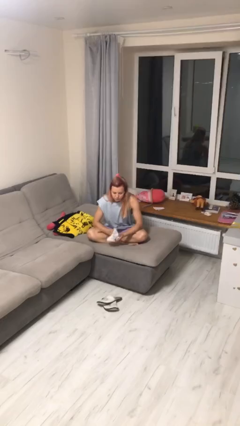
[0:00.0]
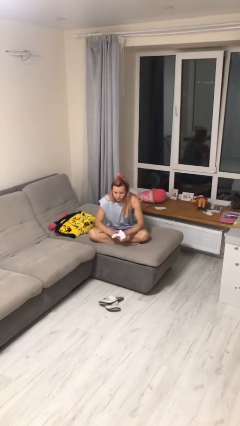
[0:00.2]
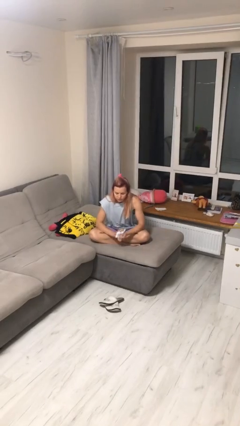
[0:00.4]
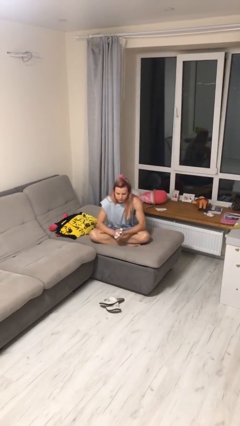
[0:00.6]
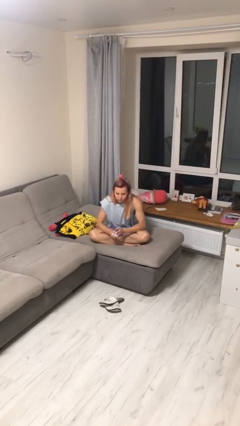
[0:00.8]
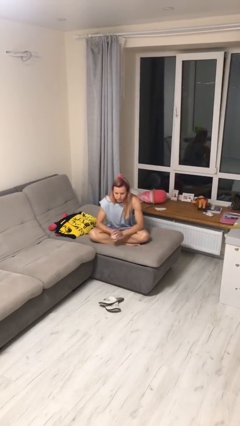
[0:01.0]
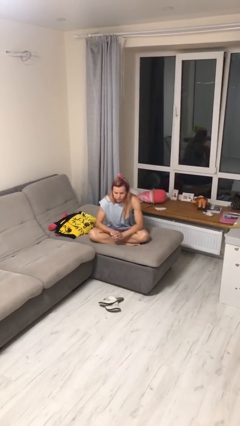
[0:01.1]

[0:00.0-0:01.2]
person crumples paper

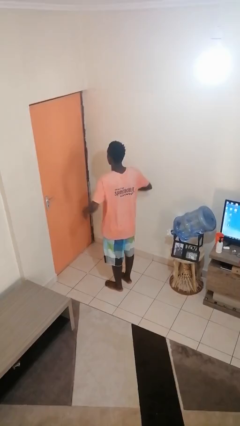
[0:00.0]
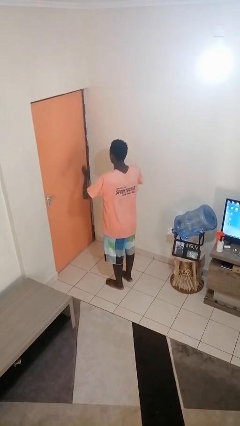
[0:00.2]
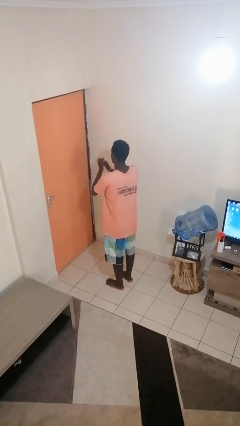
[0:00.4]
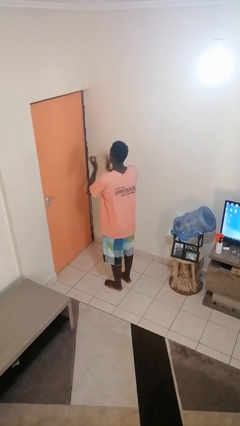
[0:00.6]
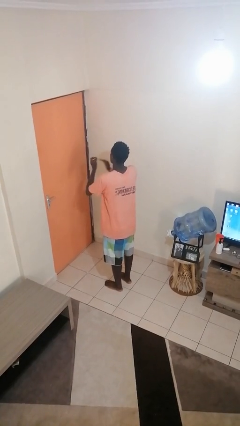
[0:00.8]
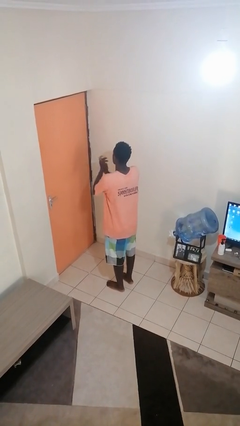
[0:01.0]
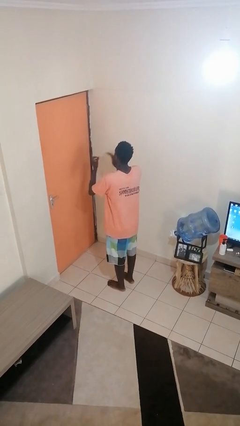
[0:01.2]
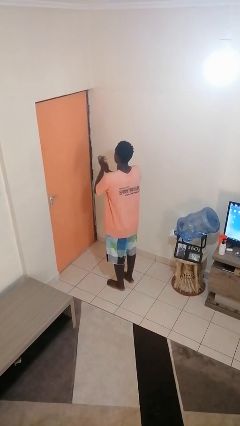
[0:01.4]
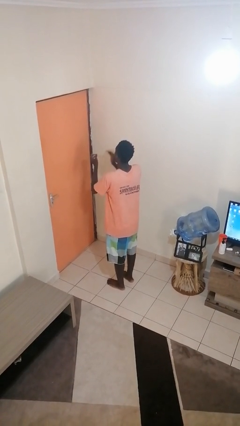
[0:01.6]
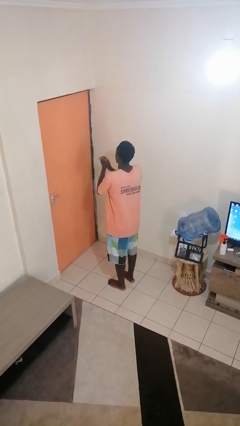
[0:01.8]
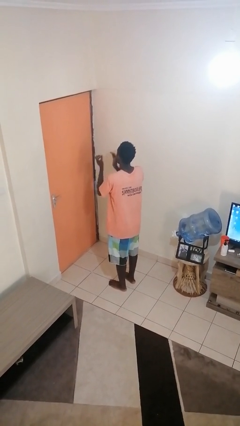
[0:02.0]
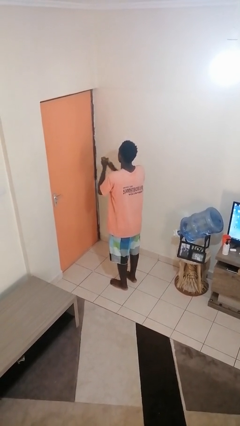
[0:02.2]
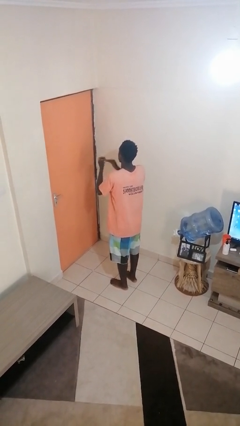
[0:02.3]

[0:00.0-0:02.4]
person claps hands

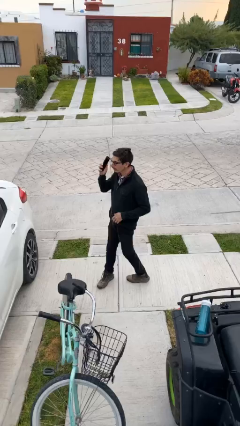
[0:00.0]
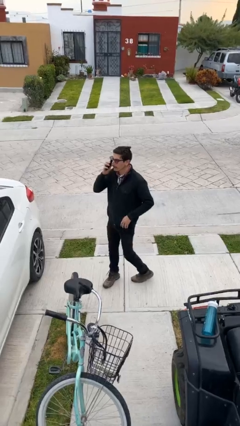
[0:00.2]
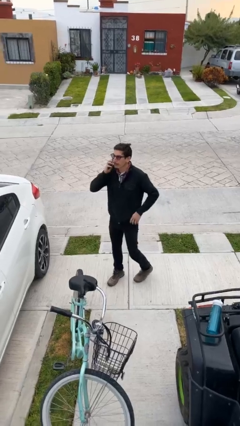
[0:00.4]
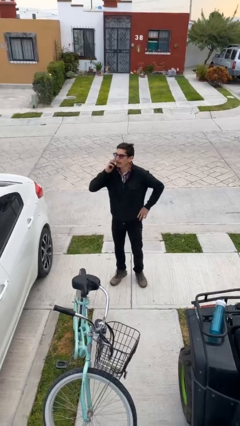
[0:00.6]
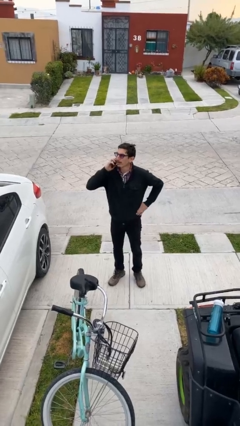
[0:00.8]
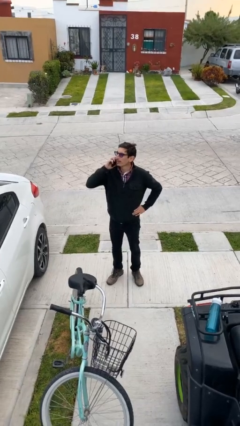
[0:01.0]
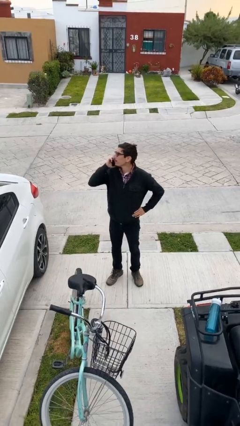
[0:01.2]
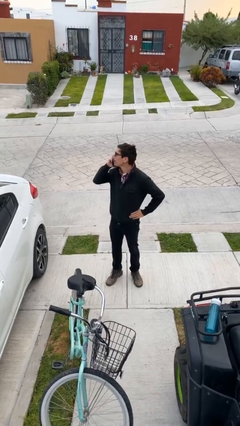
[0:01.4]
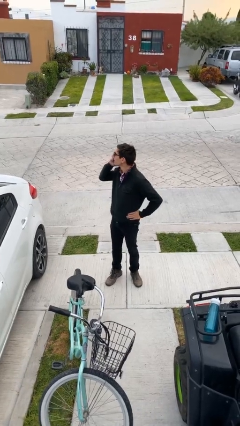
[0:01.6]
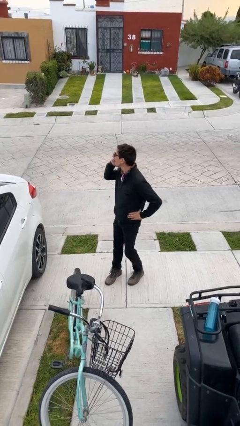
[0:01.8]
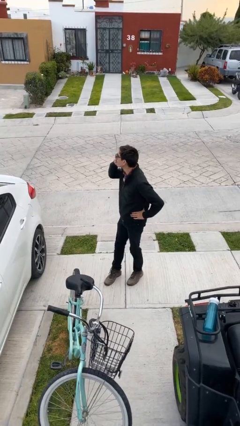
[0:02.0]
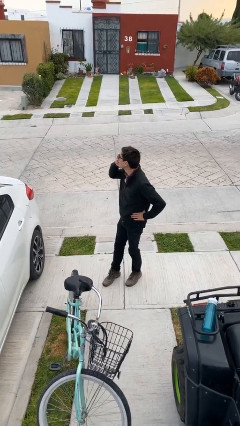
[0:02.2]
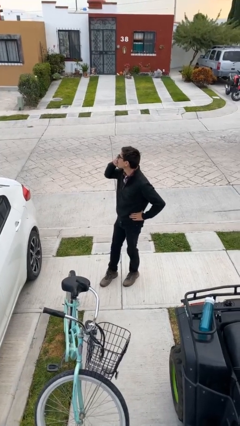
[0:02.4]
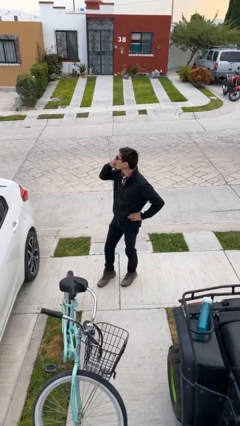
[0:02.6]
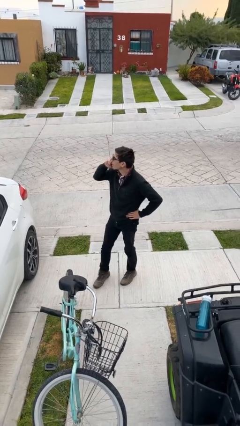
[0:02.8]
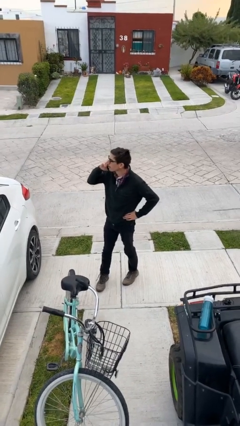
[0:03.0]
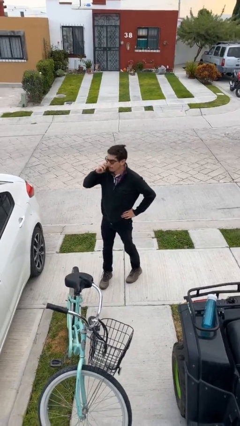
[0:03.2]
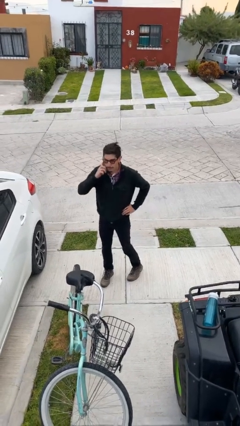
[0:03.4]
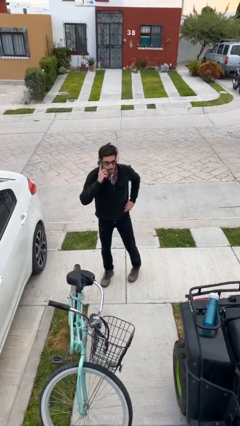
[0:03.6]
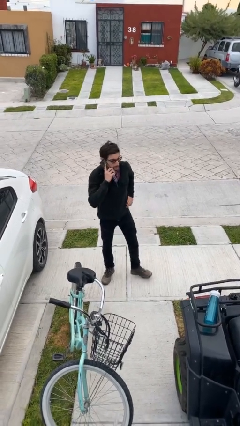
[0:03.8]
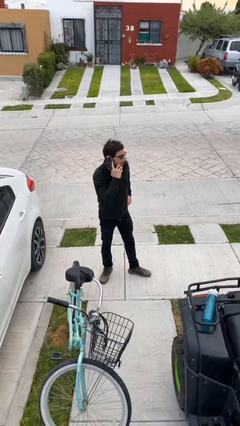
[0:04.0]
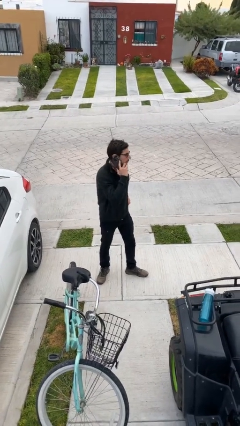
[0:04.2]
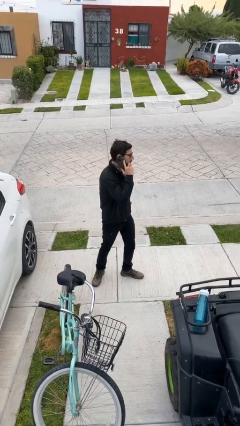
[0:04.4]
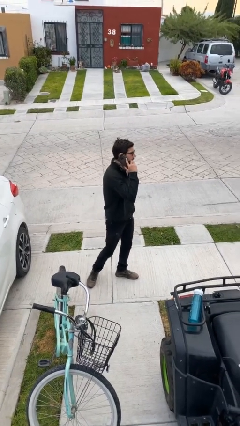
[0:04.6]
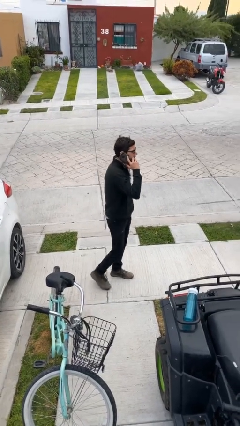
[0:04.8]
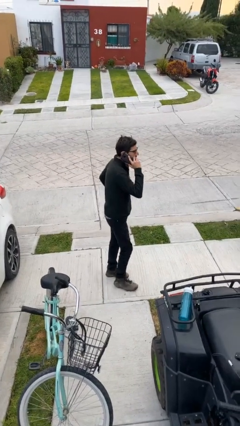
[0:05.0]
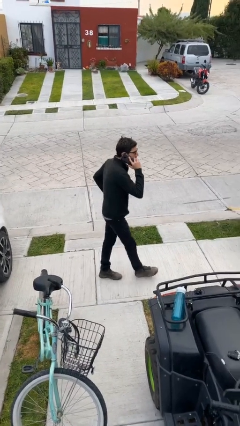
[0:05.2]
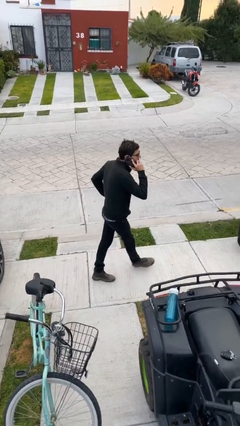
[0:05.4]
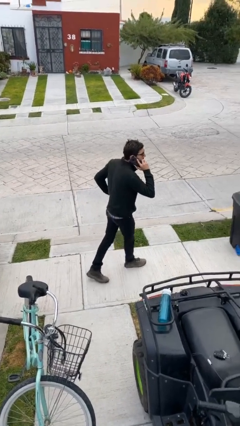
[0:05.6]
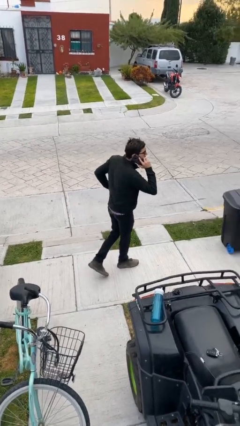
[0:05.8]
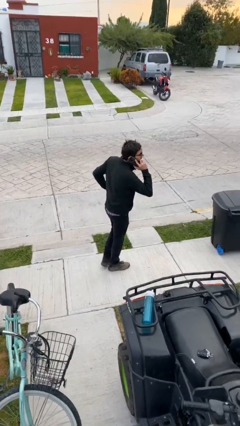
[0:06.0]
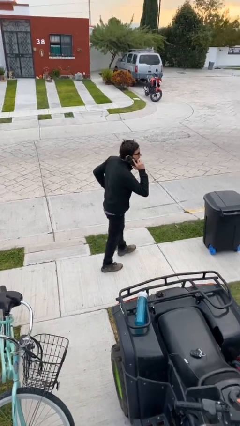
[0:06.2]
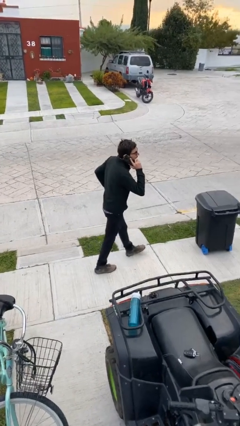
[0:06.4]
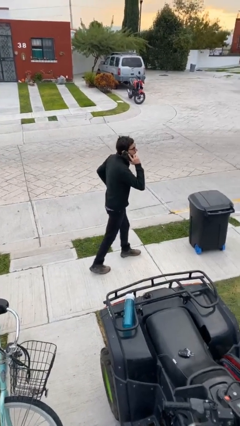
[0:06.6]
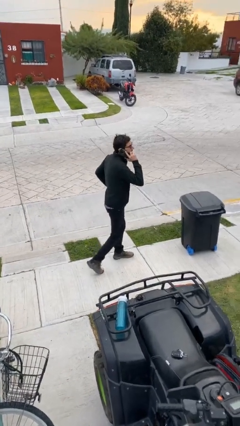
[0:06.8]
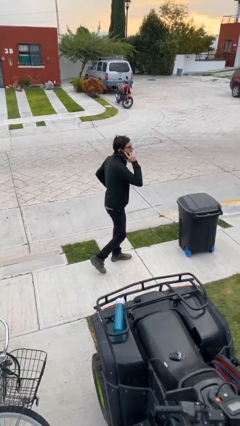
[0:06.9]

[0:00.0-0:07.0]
person talks on phone

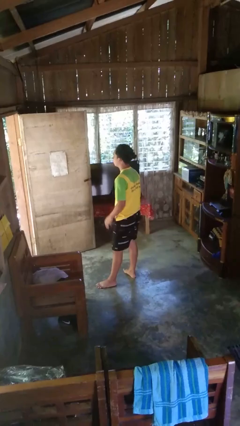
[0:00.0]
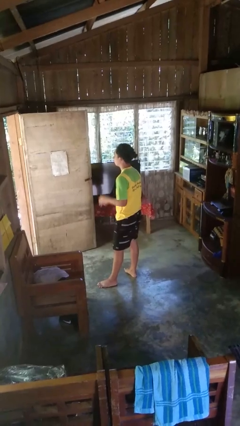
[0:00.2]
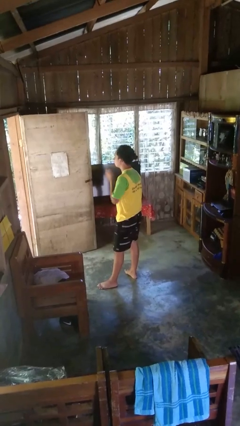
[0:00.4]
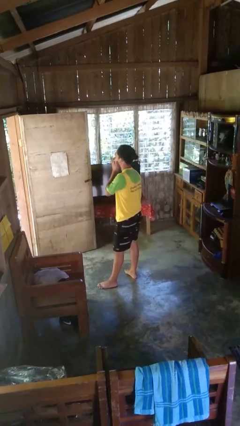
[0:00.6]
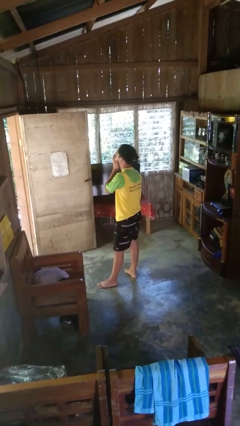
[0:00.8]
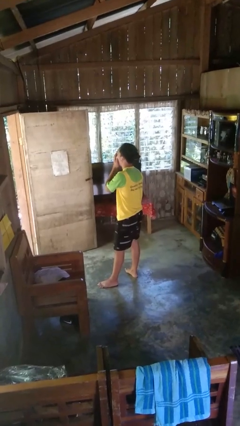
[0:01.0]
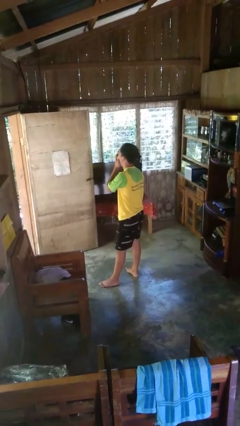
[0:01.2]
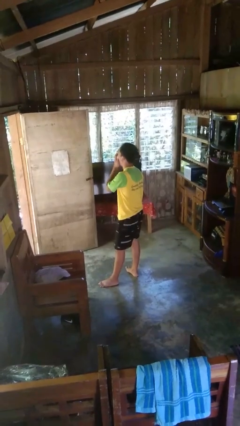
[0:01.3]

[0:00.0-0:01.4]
person yawns

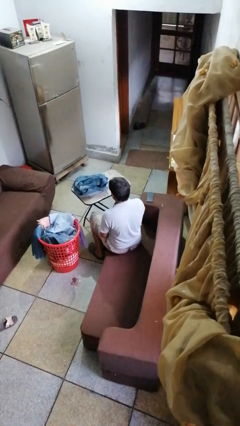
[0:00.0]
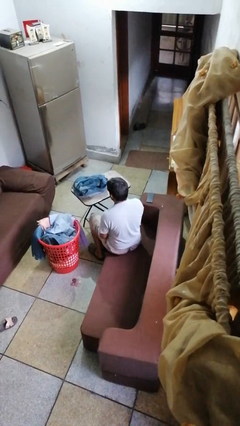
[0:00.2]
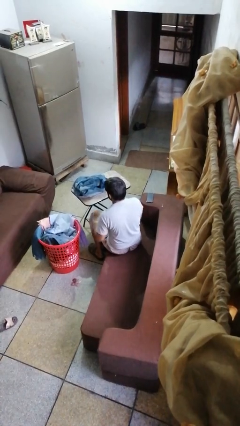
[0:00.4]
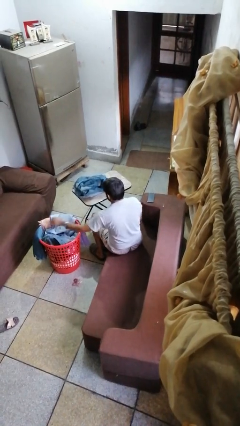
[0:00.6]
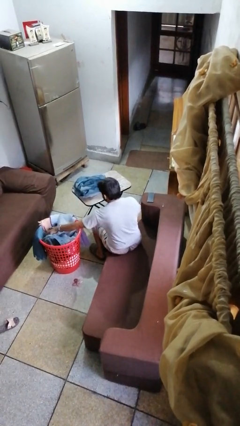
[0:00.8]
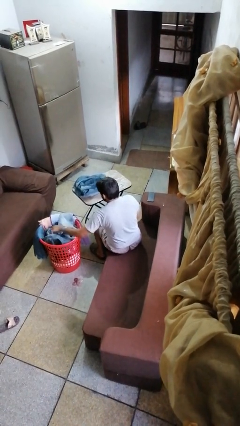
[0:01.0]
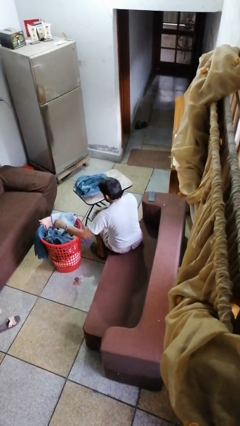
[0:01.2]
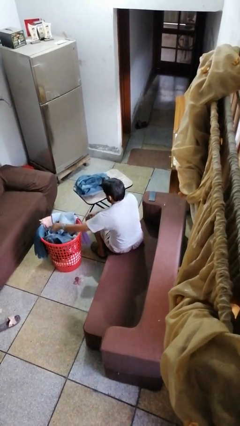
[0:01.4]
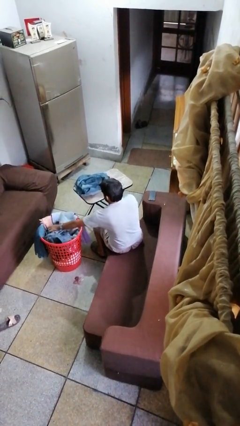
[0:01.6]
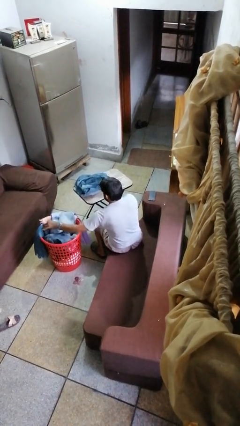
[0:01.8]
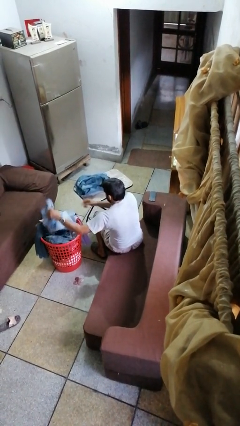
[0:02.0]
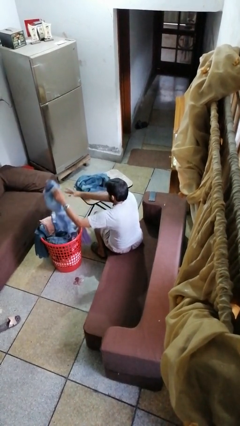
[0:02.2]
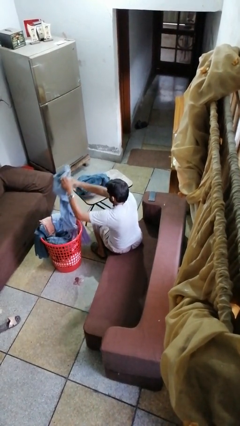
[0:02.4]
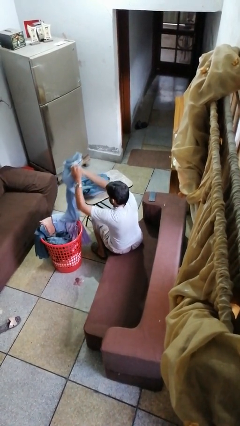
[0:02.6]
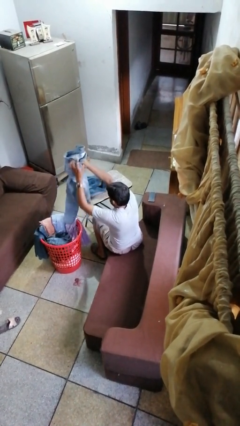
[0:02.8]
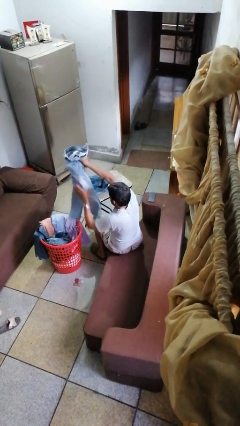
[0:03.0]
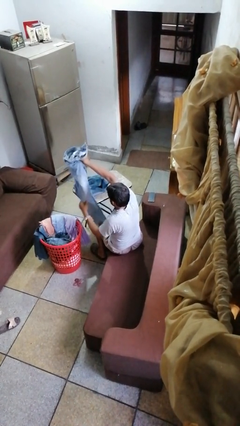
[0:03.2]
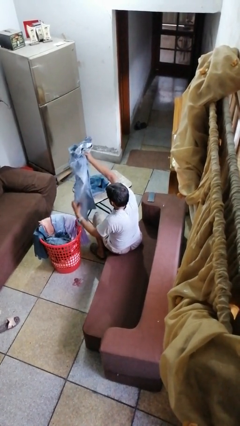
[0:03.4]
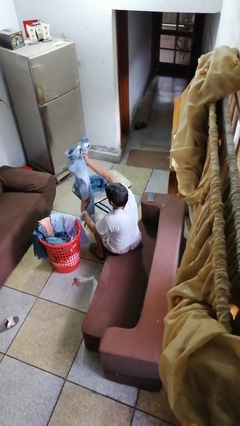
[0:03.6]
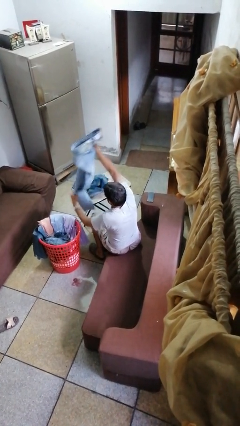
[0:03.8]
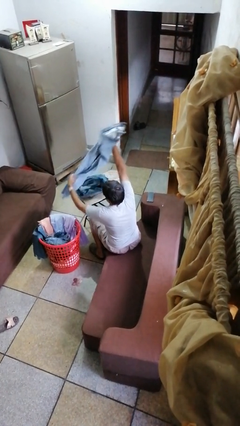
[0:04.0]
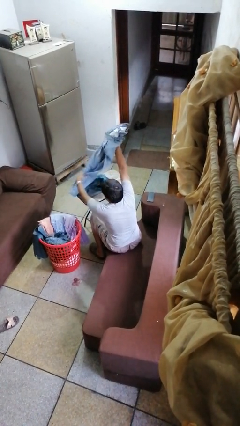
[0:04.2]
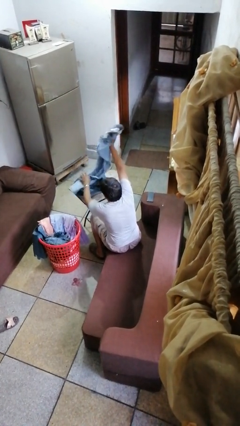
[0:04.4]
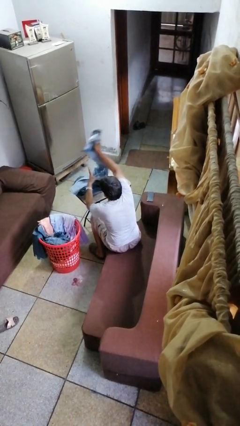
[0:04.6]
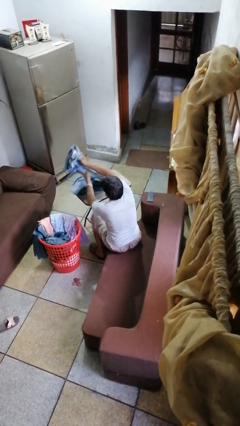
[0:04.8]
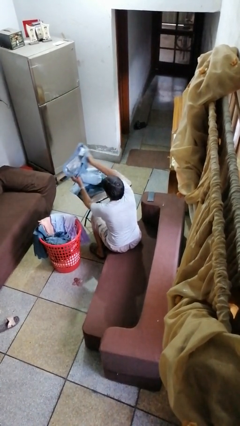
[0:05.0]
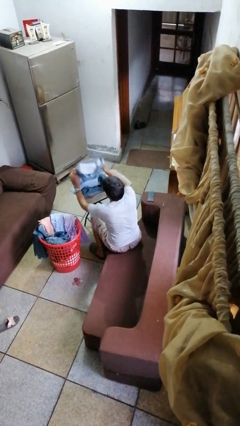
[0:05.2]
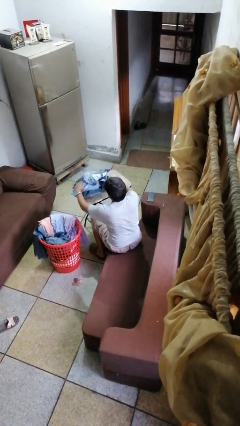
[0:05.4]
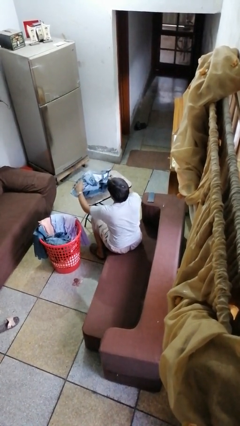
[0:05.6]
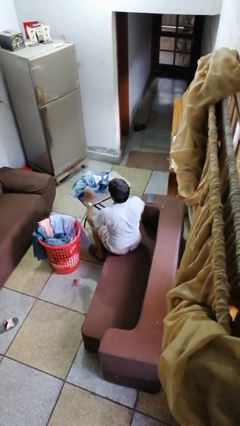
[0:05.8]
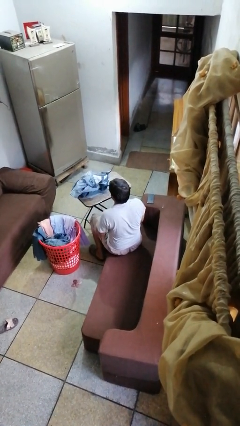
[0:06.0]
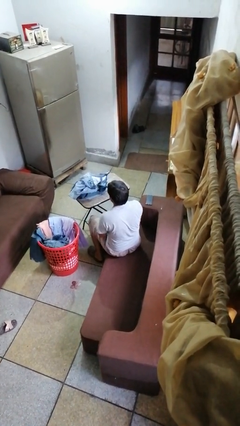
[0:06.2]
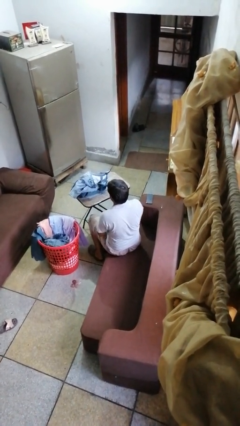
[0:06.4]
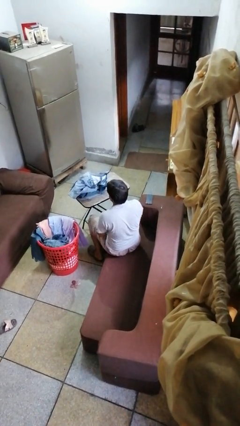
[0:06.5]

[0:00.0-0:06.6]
person folds pants
